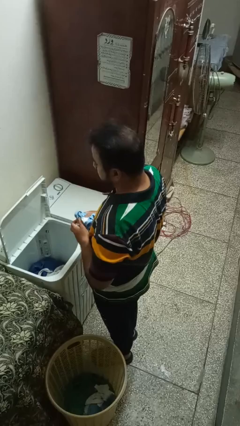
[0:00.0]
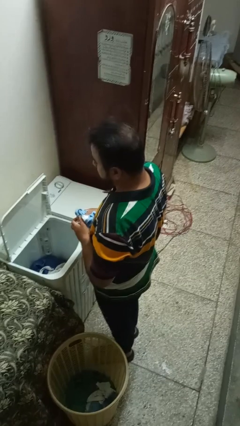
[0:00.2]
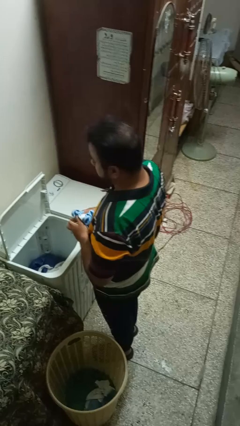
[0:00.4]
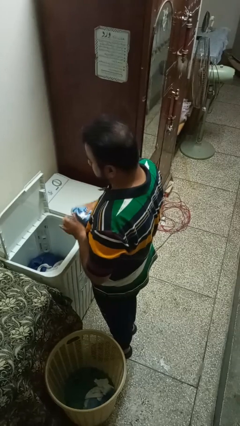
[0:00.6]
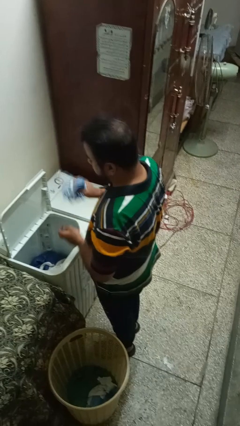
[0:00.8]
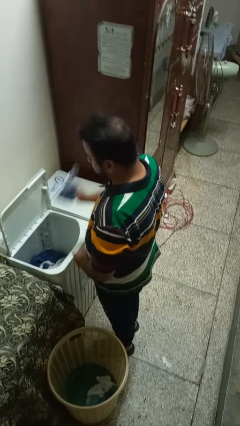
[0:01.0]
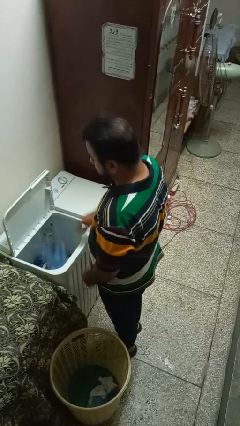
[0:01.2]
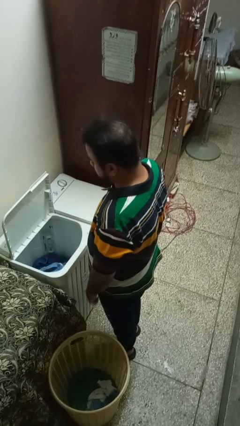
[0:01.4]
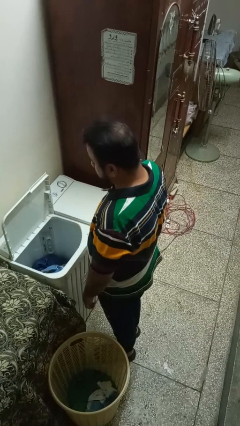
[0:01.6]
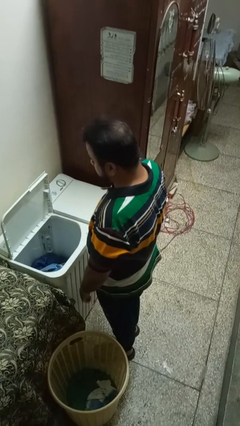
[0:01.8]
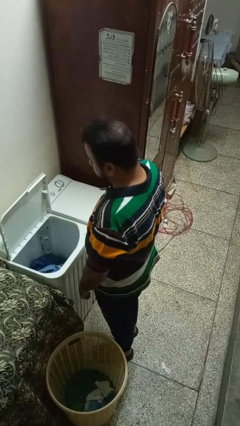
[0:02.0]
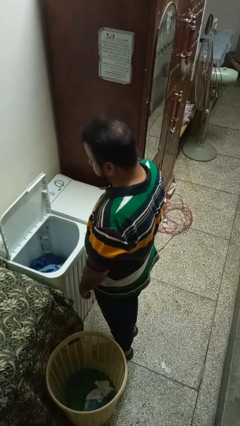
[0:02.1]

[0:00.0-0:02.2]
person loads clotheswasher

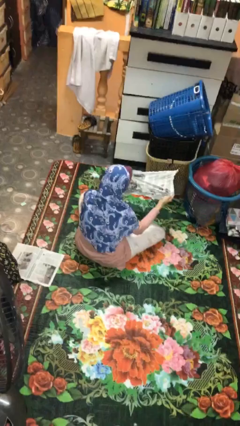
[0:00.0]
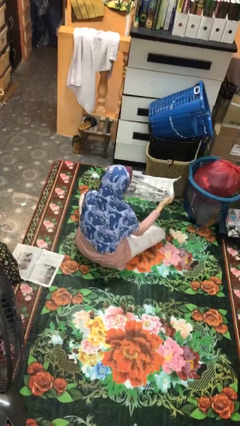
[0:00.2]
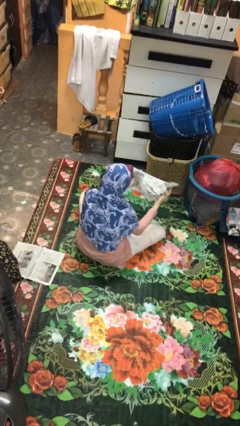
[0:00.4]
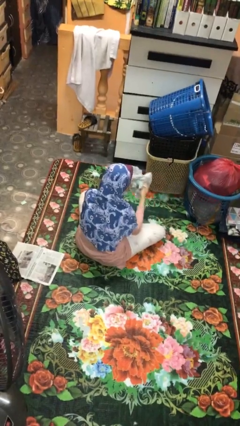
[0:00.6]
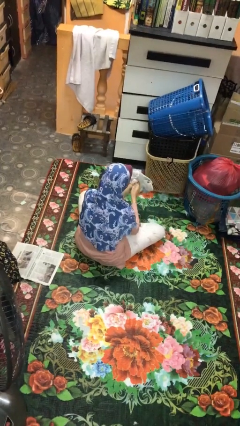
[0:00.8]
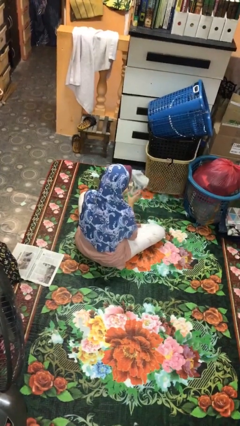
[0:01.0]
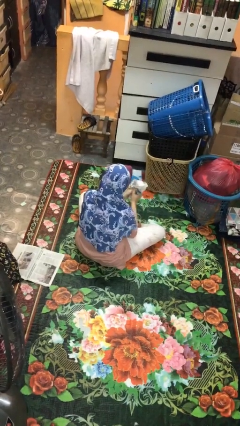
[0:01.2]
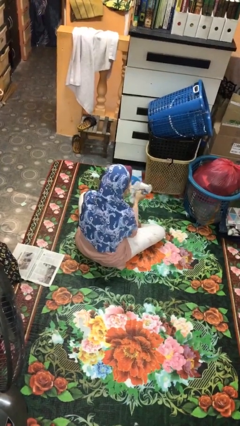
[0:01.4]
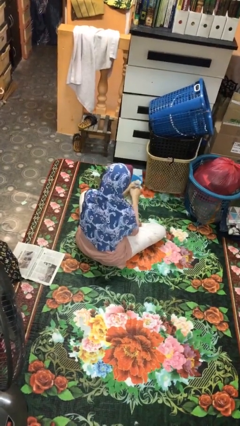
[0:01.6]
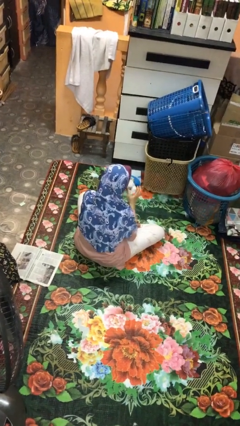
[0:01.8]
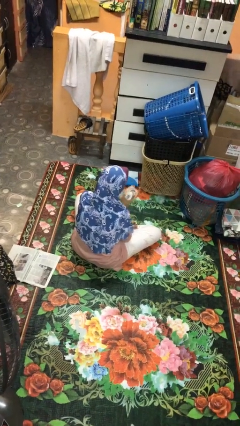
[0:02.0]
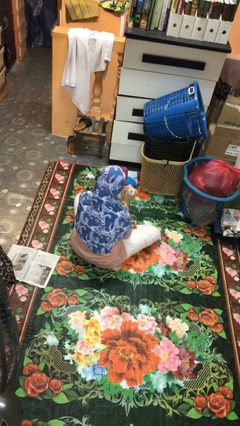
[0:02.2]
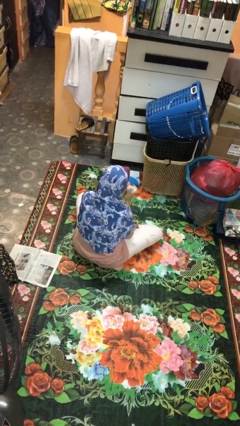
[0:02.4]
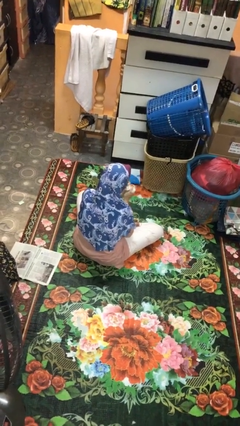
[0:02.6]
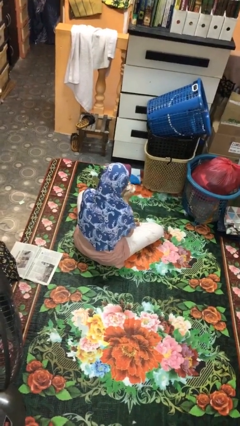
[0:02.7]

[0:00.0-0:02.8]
person crumples paper

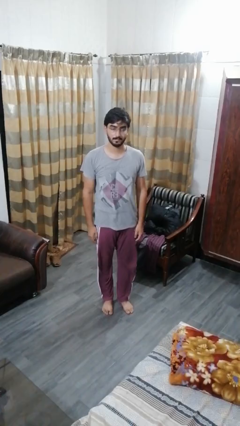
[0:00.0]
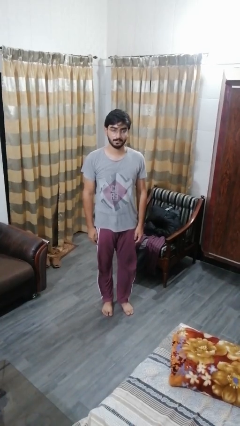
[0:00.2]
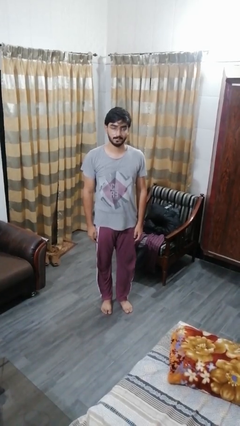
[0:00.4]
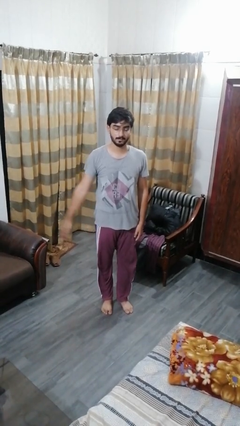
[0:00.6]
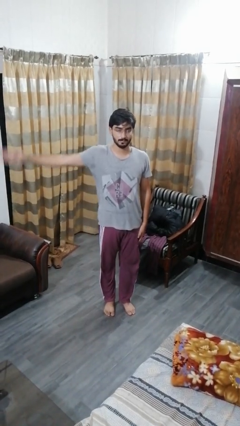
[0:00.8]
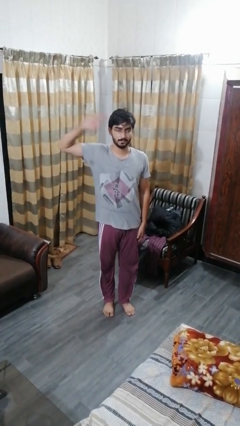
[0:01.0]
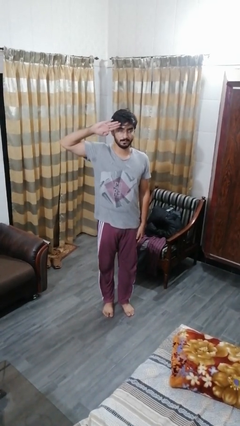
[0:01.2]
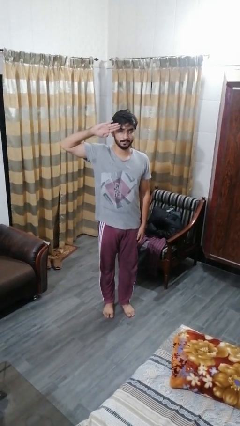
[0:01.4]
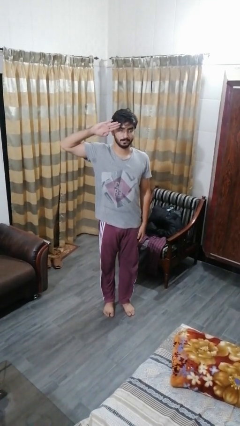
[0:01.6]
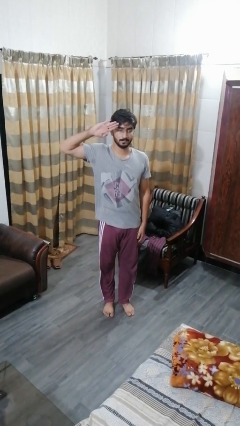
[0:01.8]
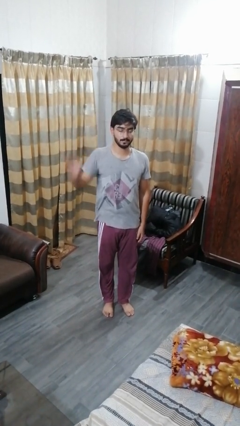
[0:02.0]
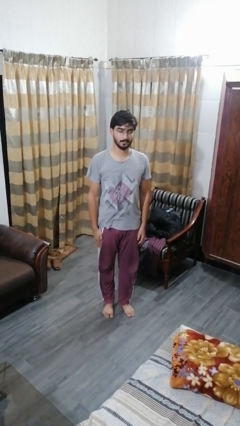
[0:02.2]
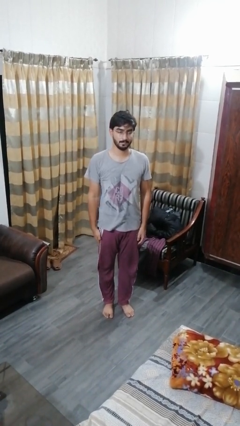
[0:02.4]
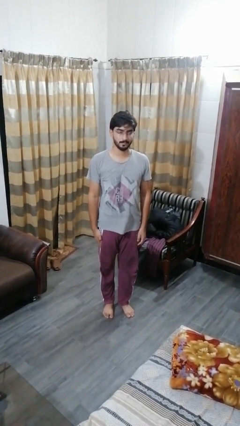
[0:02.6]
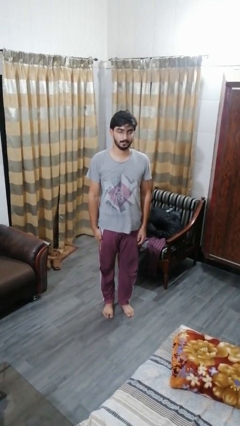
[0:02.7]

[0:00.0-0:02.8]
person salutes

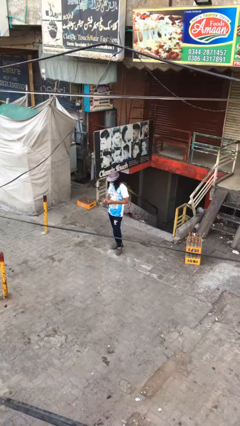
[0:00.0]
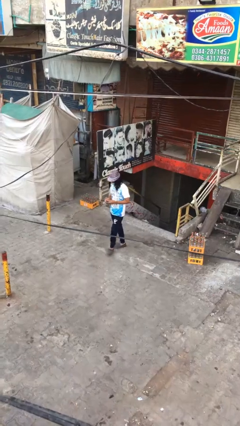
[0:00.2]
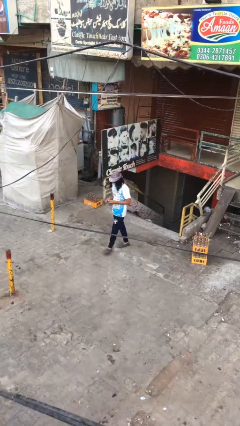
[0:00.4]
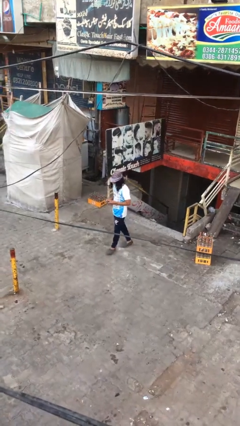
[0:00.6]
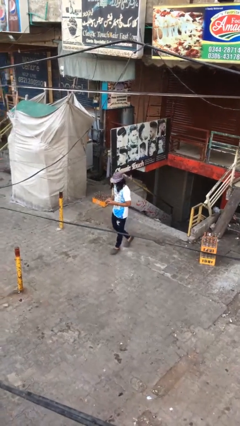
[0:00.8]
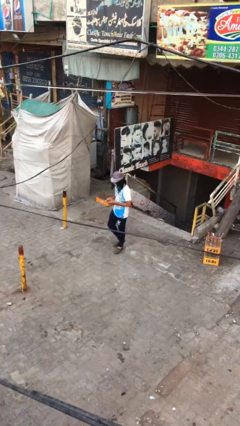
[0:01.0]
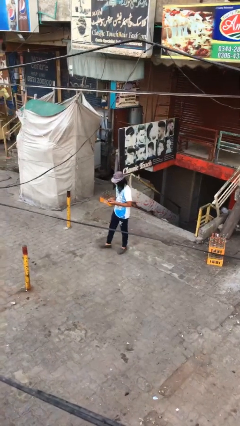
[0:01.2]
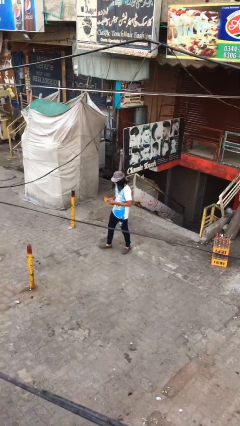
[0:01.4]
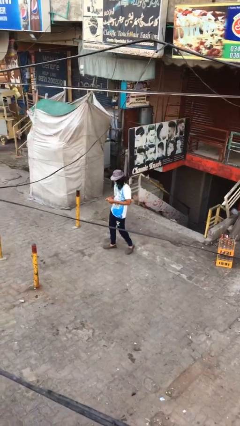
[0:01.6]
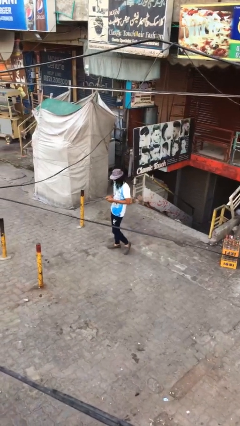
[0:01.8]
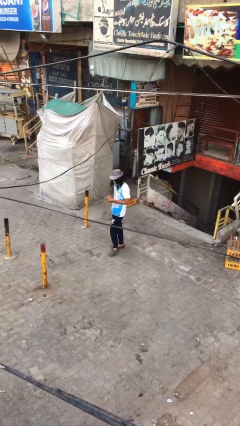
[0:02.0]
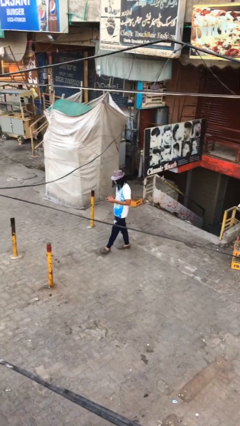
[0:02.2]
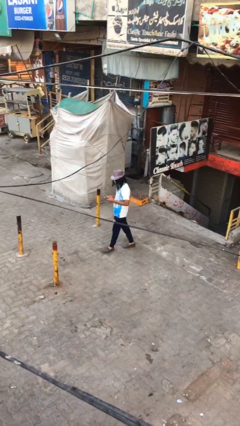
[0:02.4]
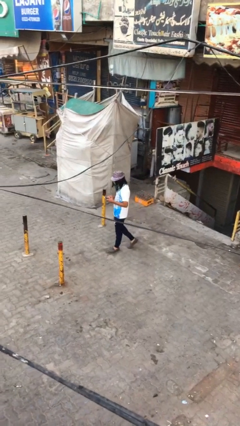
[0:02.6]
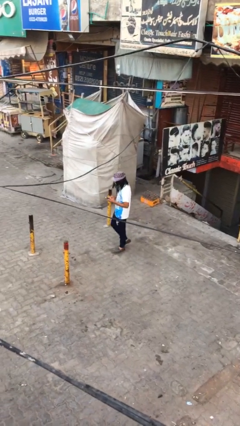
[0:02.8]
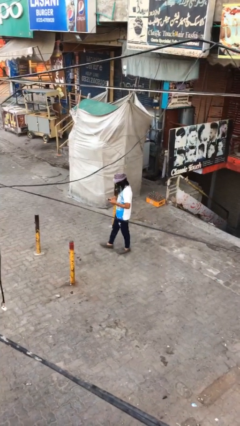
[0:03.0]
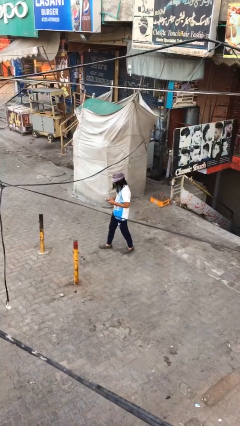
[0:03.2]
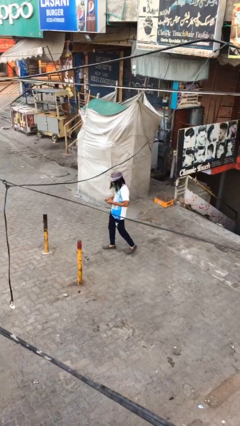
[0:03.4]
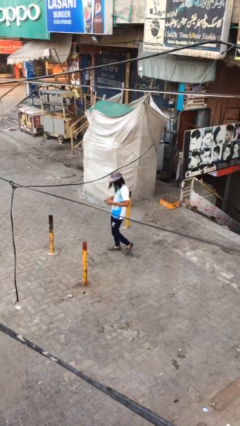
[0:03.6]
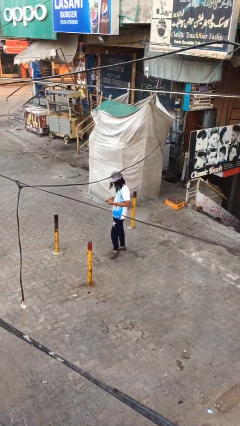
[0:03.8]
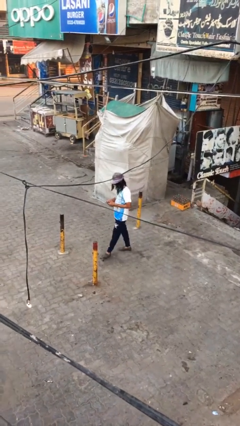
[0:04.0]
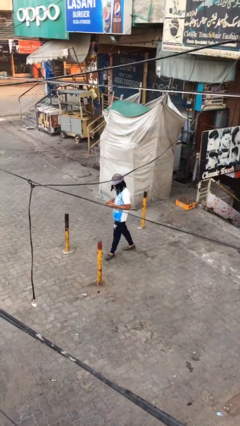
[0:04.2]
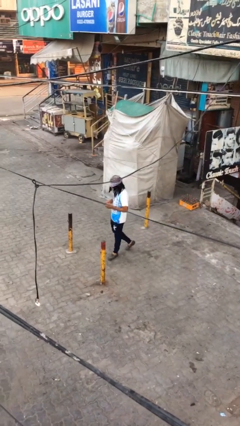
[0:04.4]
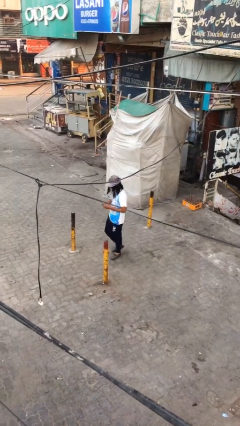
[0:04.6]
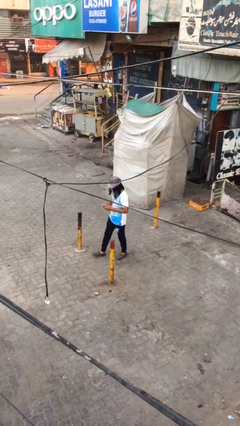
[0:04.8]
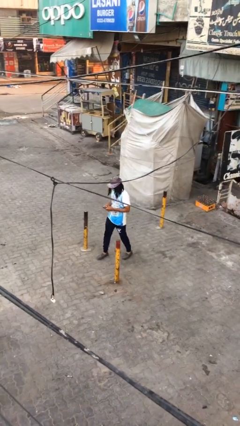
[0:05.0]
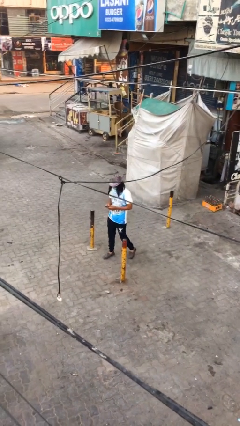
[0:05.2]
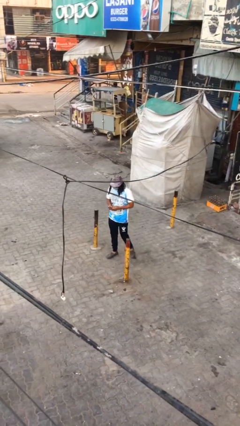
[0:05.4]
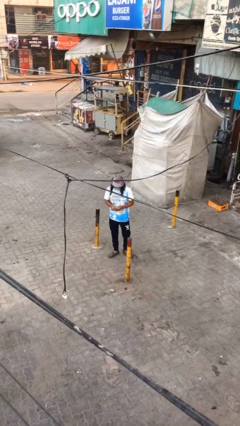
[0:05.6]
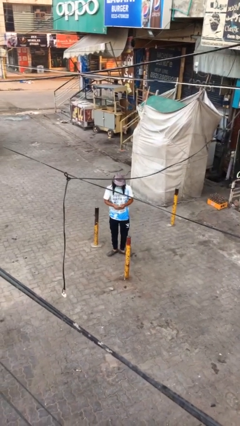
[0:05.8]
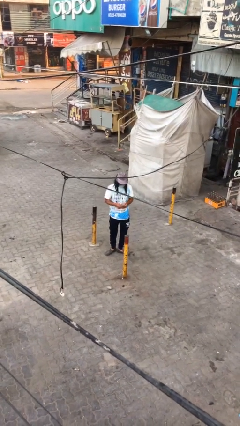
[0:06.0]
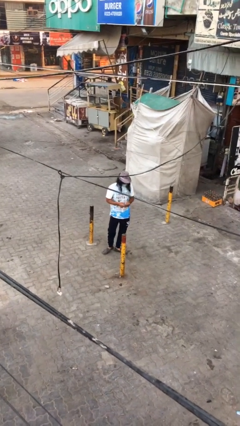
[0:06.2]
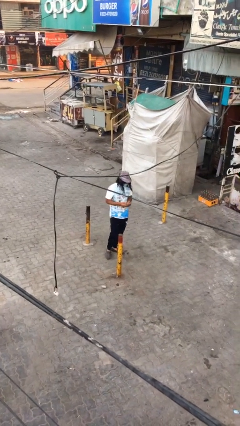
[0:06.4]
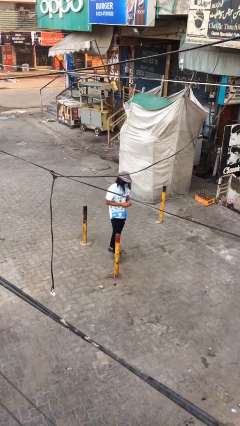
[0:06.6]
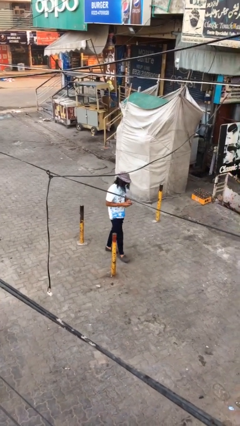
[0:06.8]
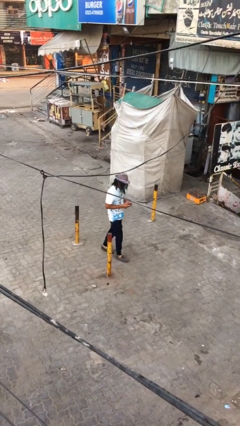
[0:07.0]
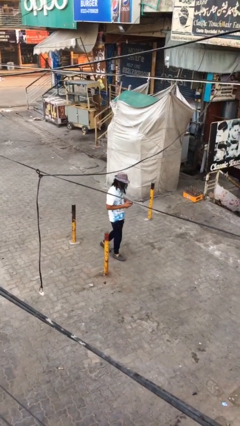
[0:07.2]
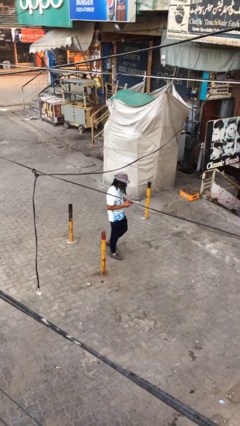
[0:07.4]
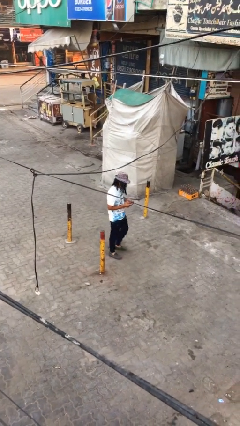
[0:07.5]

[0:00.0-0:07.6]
person texts on phone

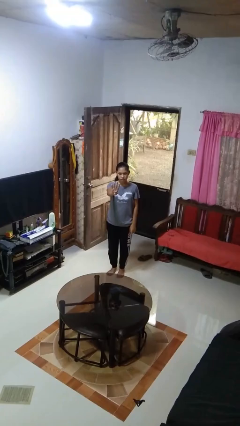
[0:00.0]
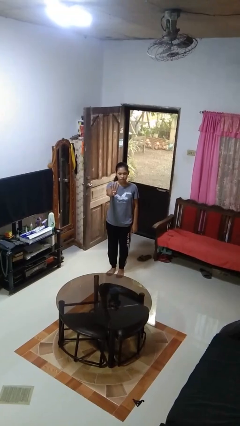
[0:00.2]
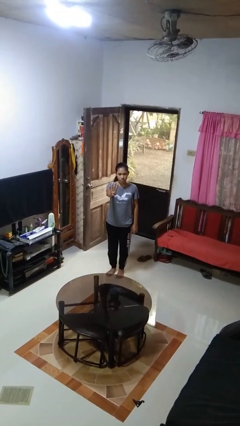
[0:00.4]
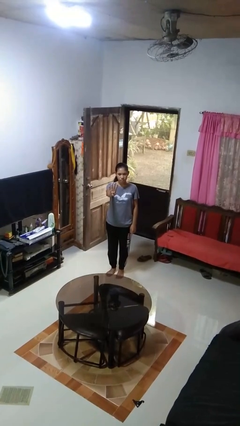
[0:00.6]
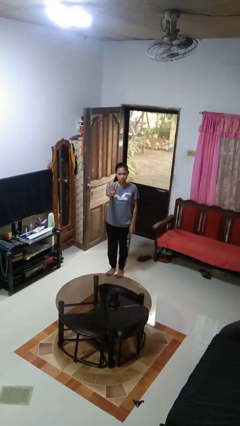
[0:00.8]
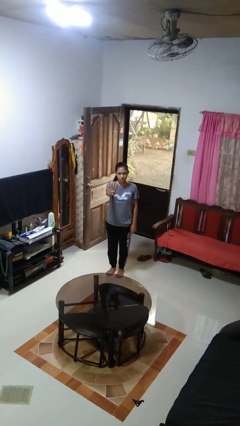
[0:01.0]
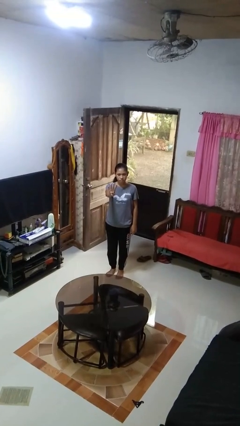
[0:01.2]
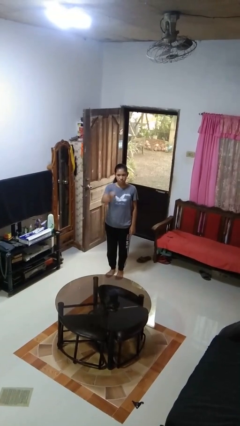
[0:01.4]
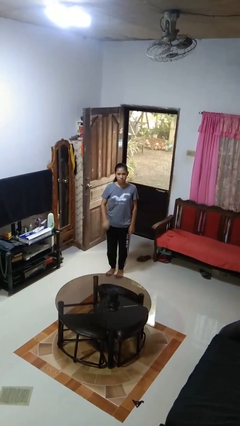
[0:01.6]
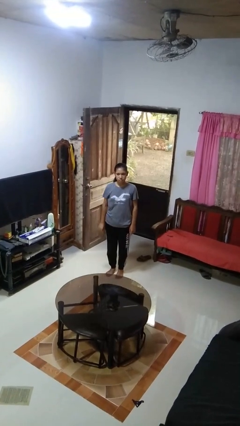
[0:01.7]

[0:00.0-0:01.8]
person gestures number four

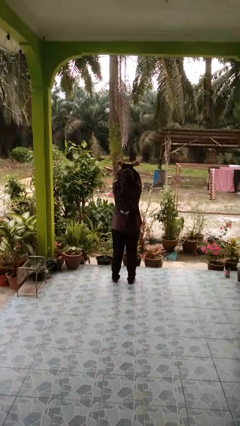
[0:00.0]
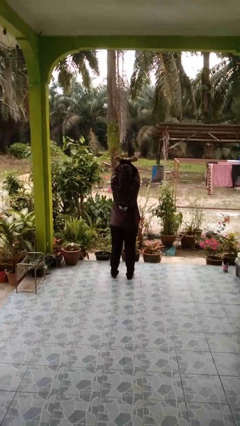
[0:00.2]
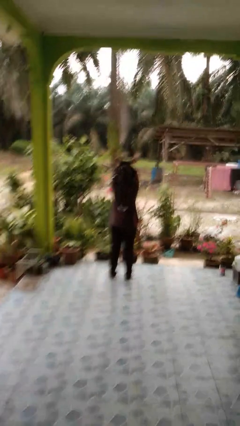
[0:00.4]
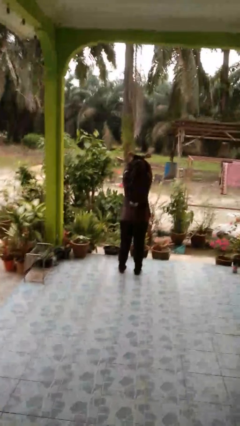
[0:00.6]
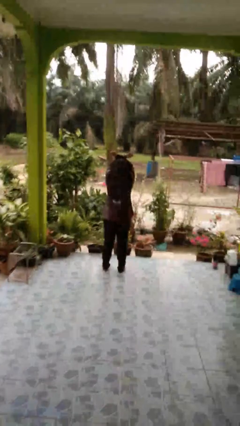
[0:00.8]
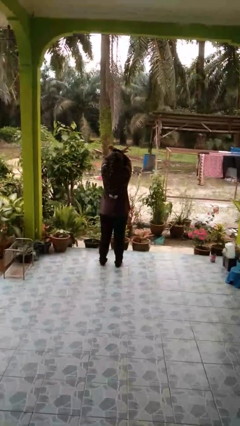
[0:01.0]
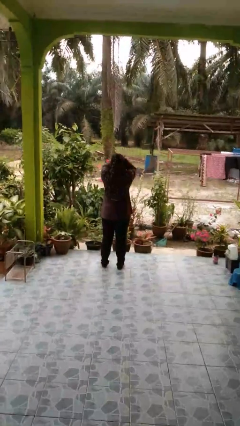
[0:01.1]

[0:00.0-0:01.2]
person crosses arms
